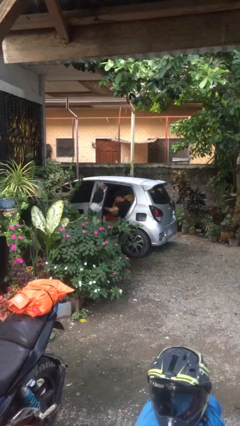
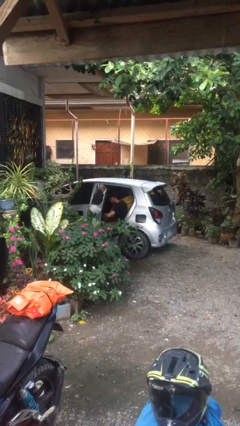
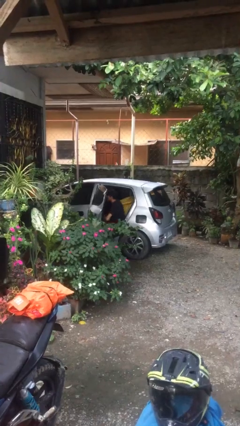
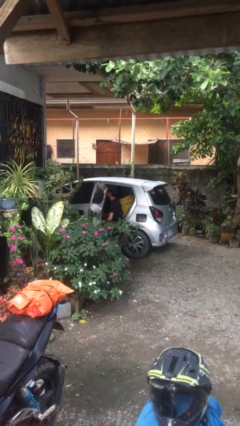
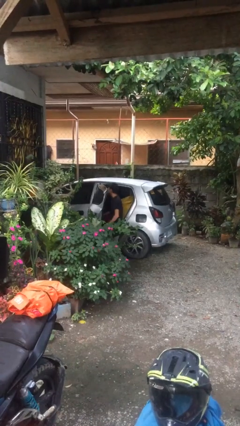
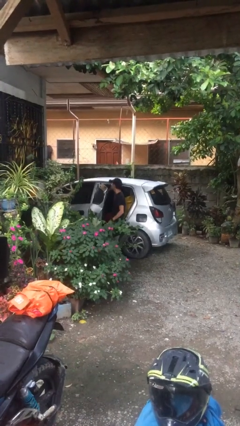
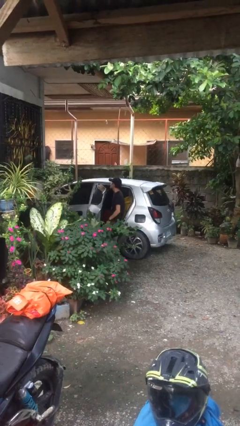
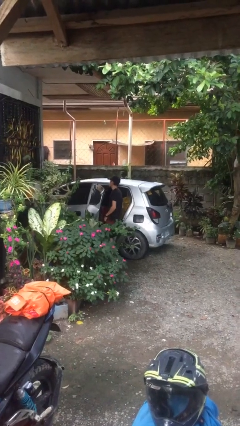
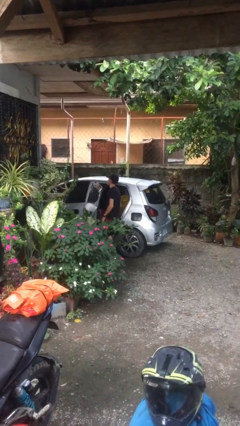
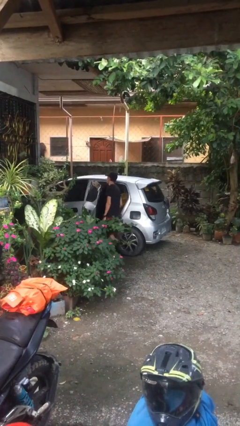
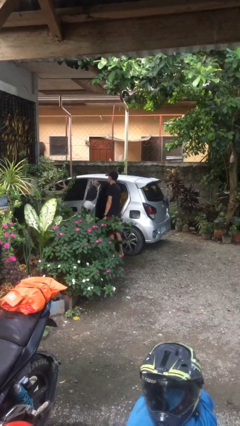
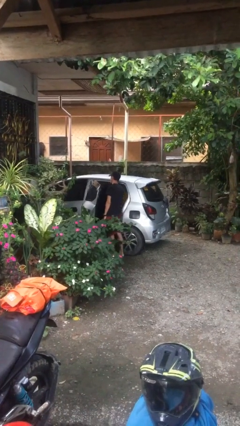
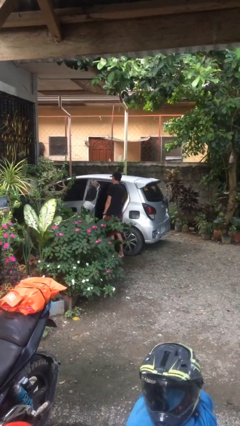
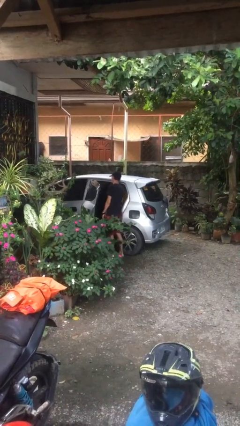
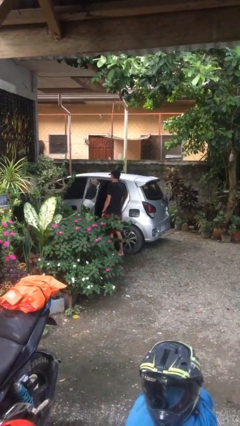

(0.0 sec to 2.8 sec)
person exits car

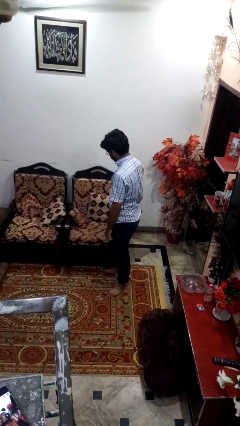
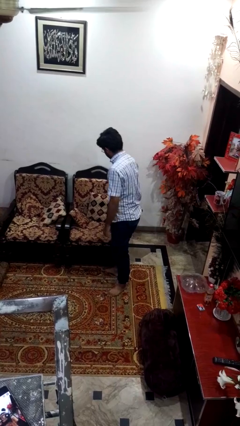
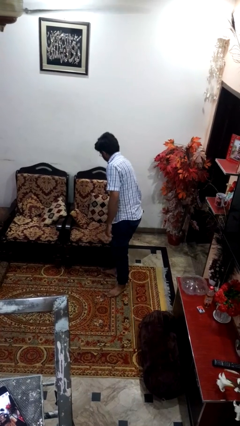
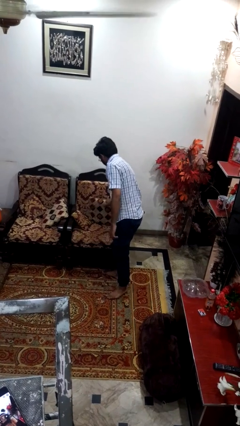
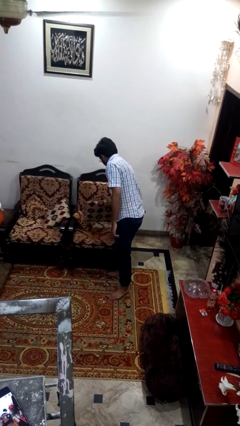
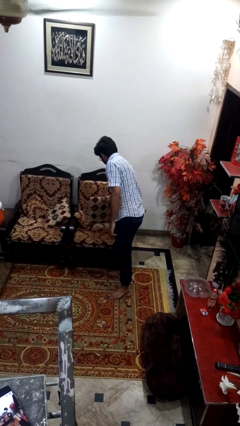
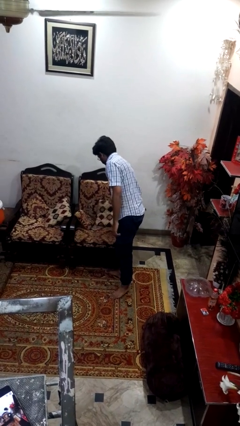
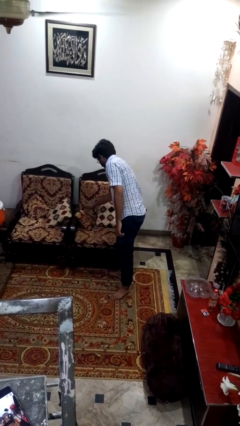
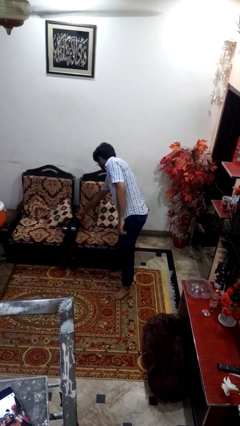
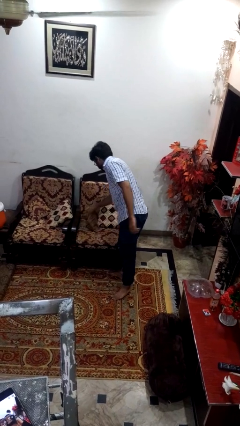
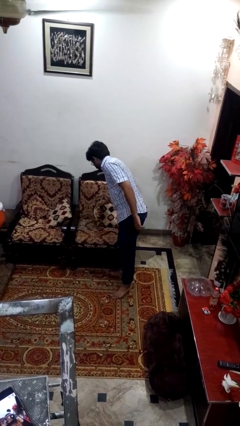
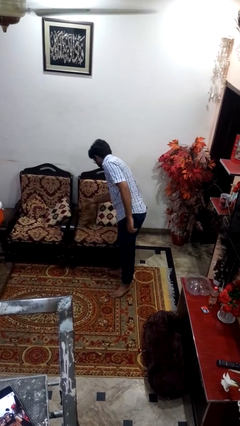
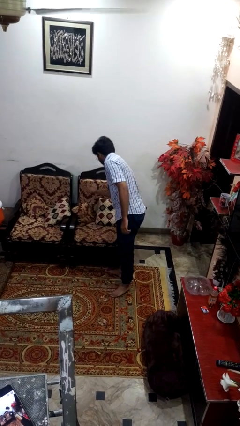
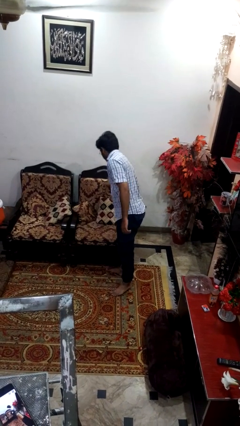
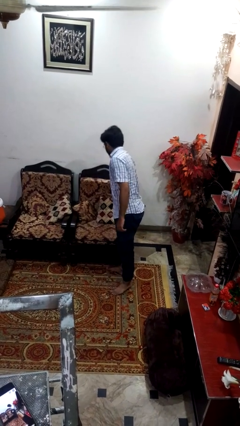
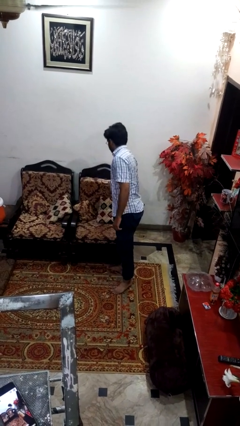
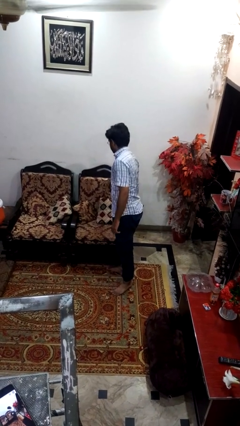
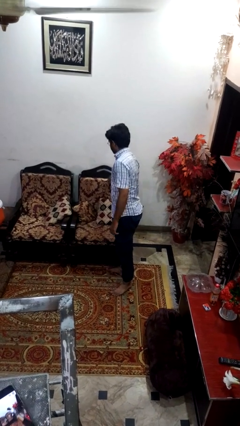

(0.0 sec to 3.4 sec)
person searches in couch

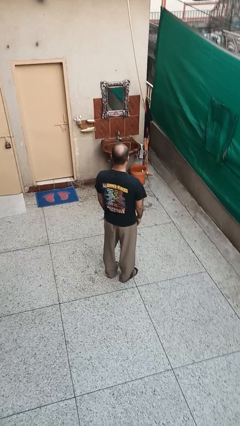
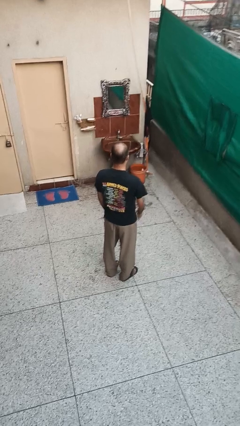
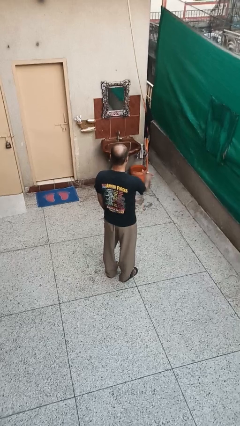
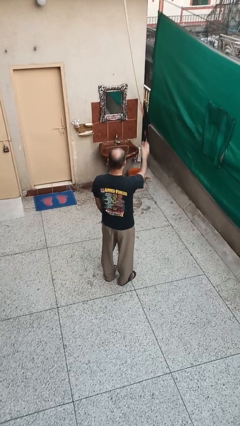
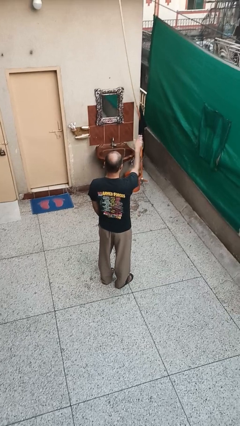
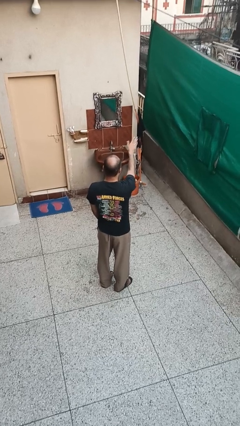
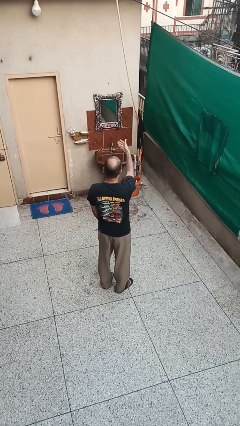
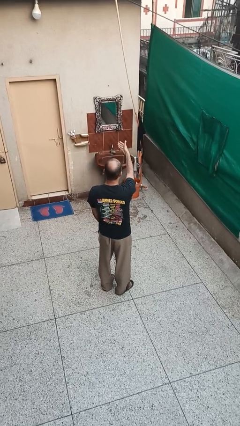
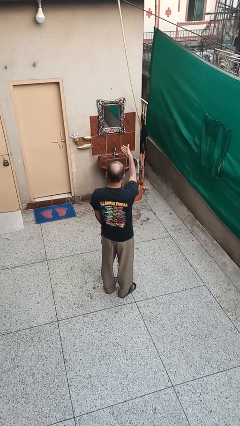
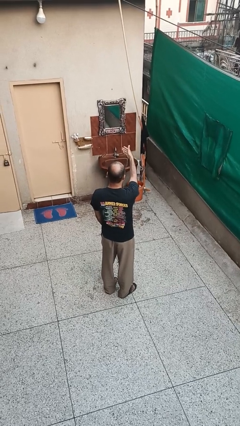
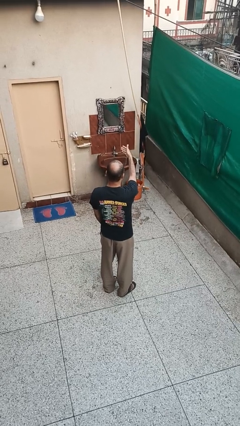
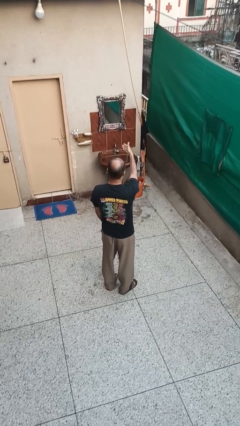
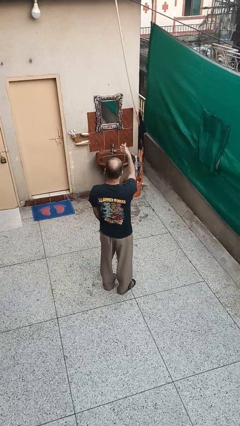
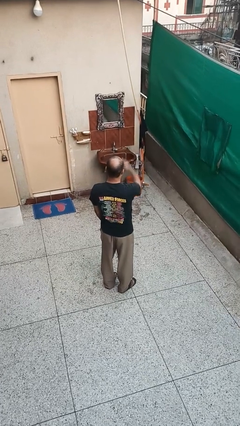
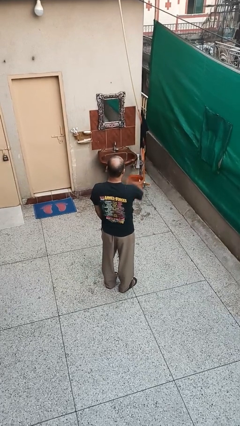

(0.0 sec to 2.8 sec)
person gestures swipe left

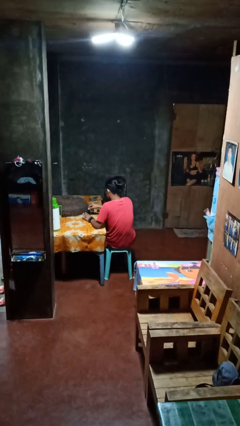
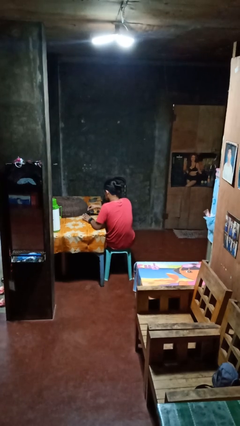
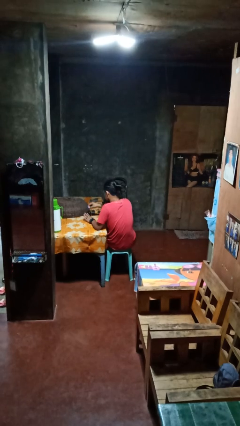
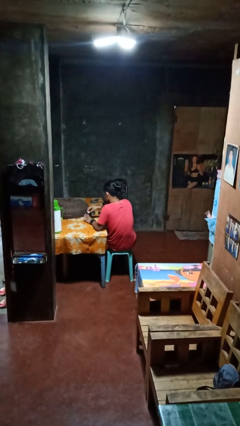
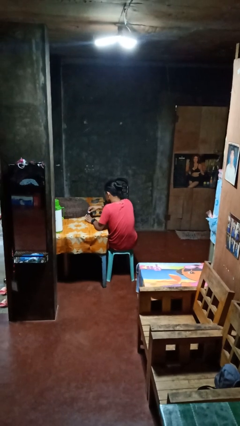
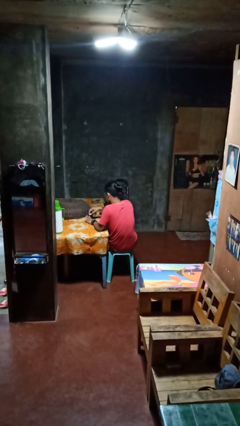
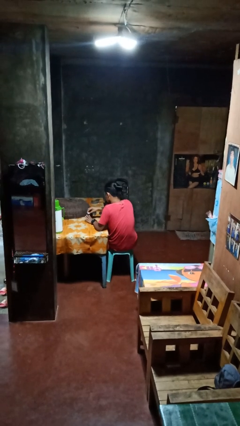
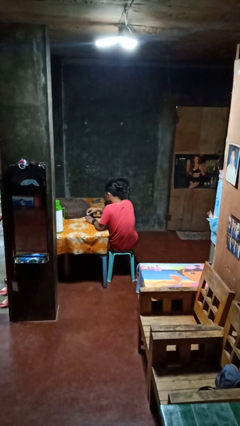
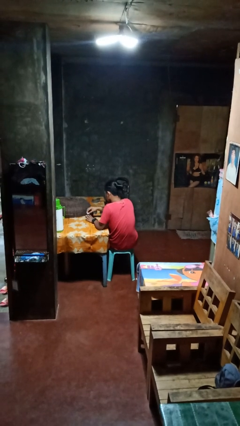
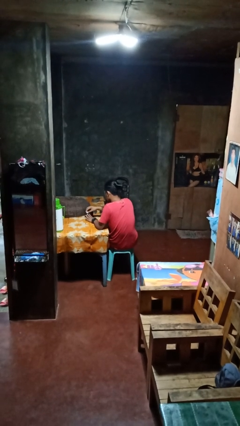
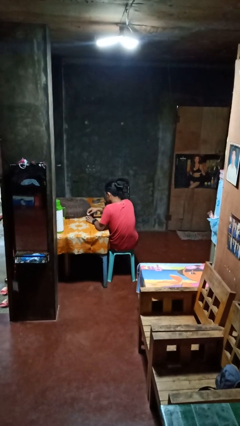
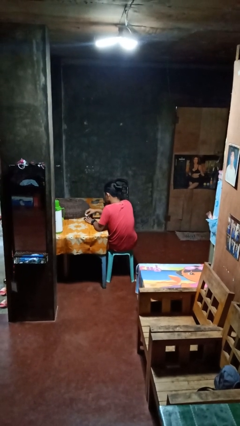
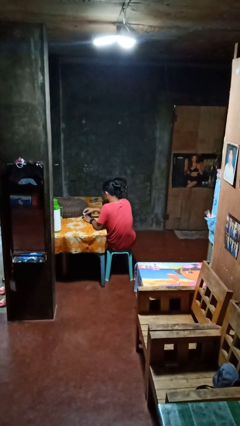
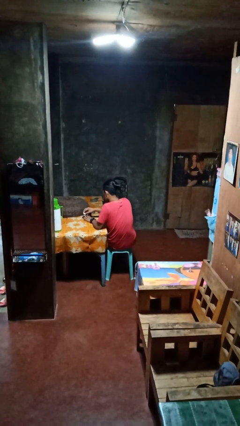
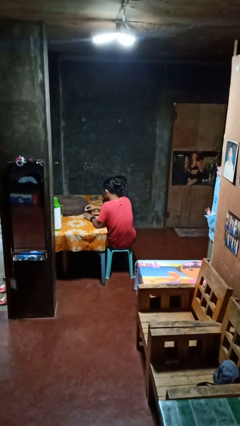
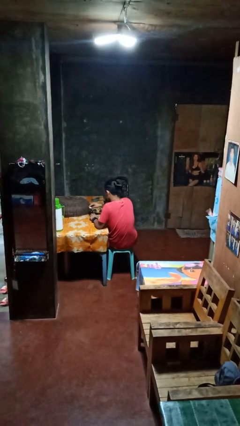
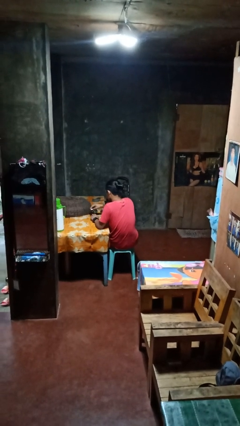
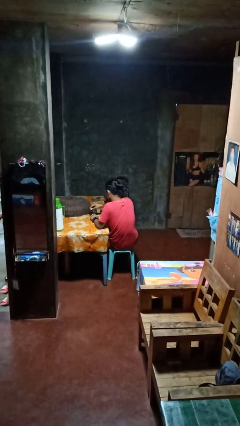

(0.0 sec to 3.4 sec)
person paints fingernails

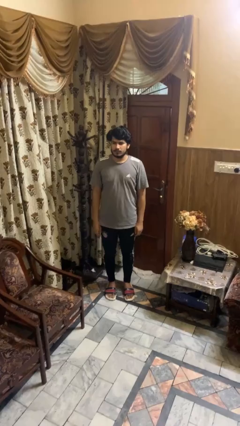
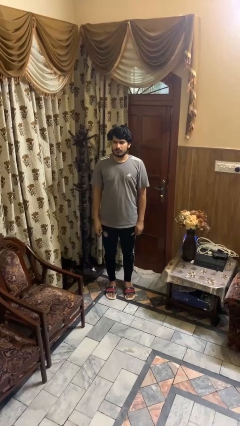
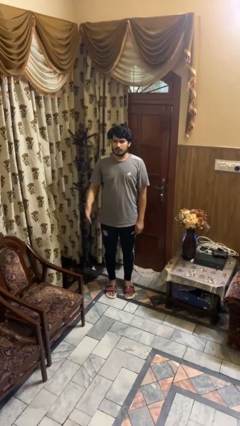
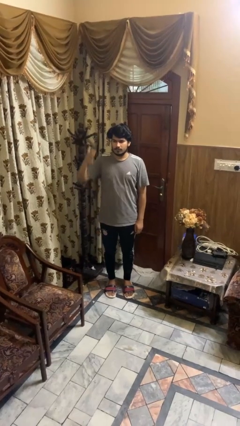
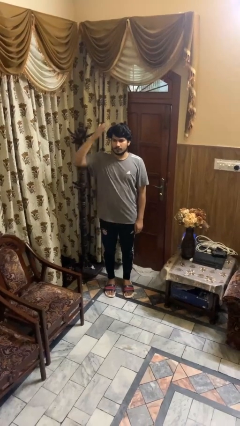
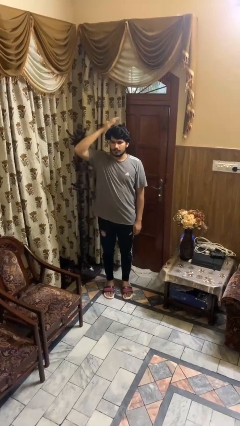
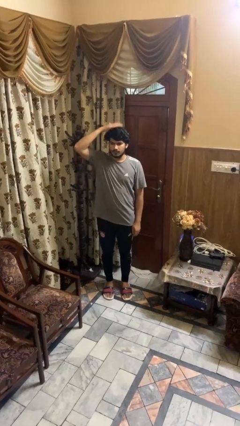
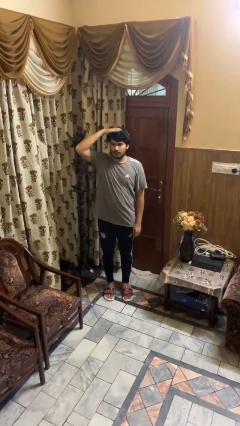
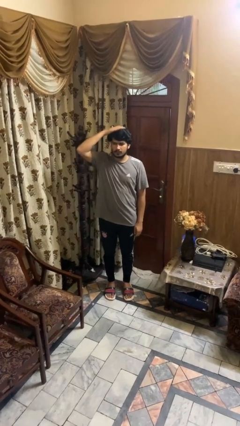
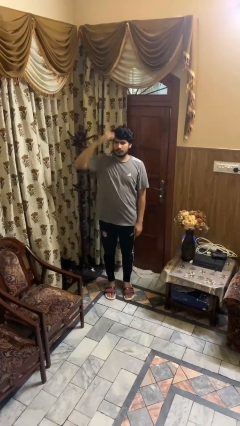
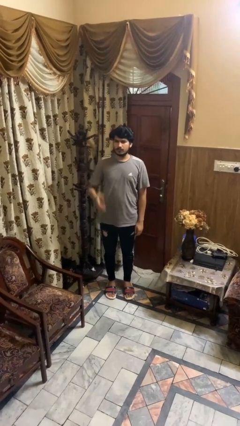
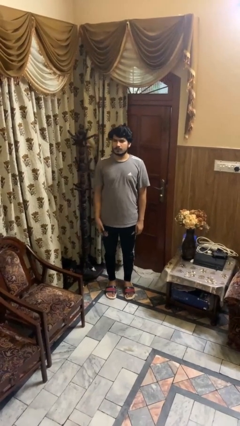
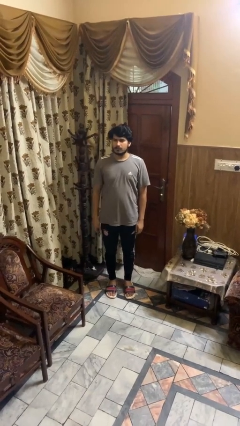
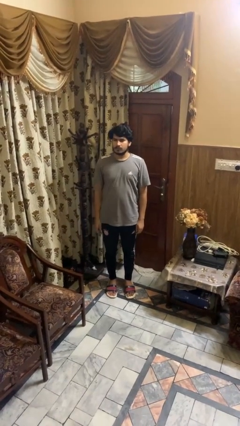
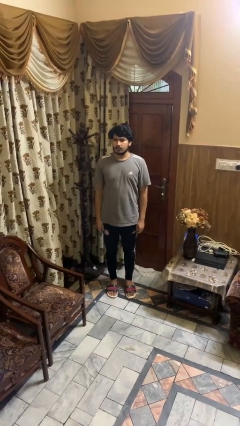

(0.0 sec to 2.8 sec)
person pats head

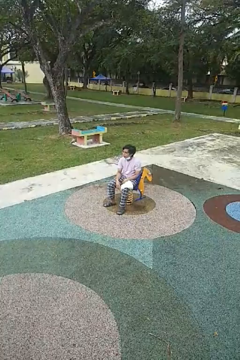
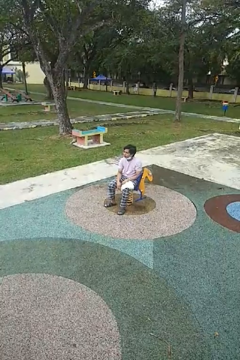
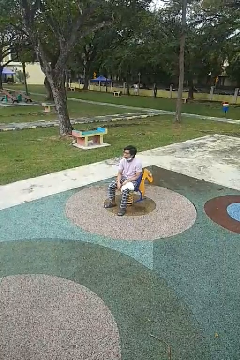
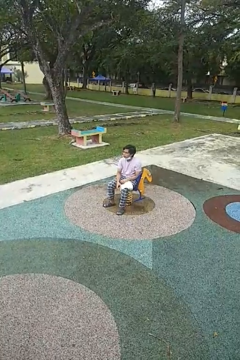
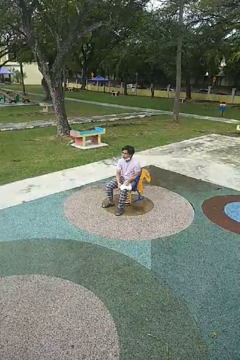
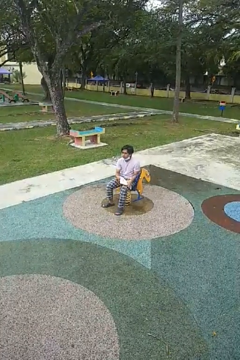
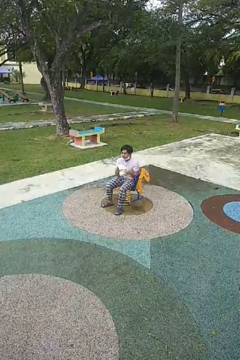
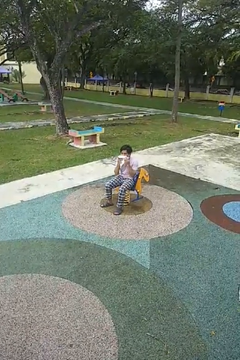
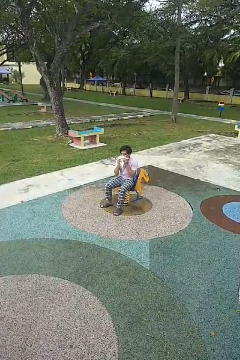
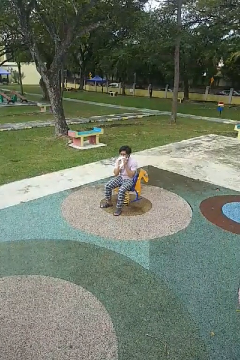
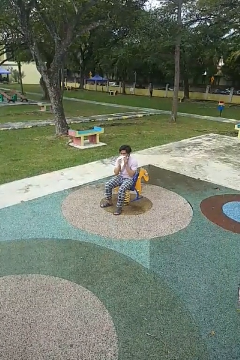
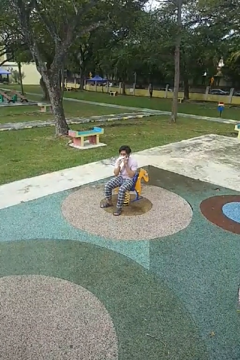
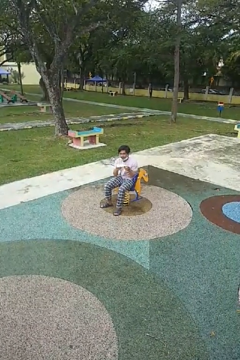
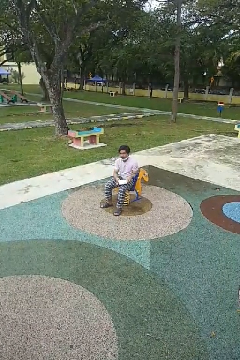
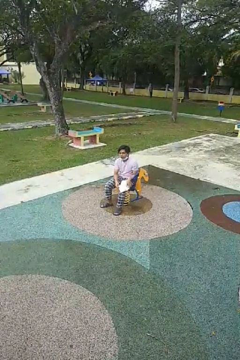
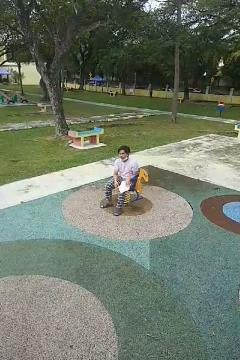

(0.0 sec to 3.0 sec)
person wipes mouth with napkin
